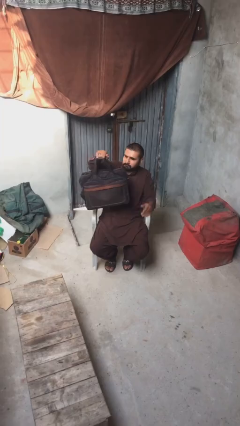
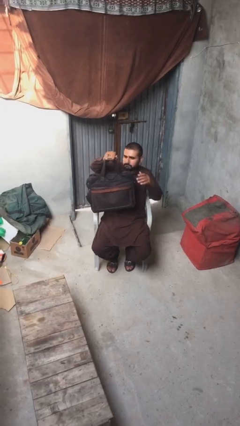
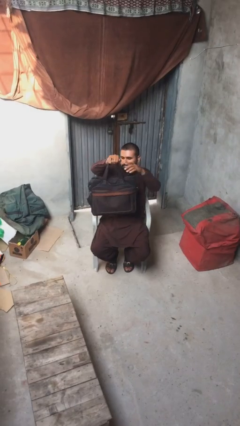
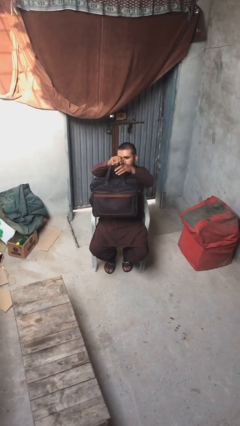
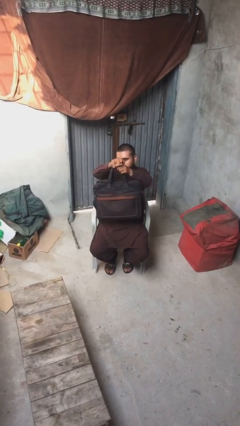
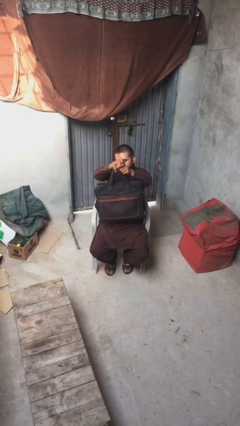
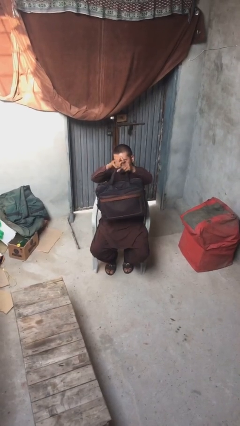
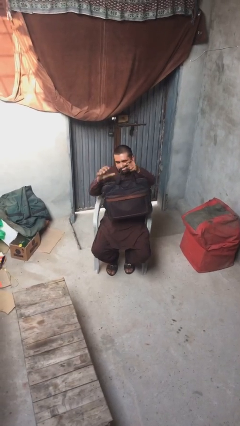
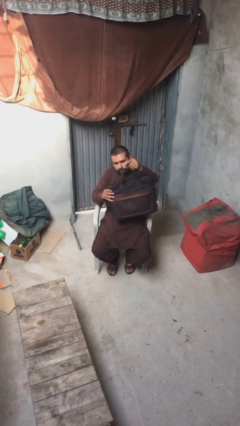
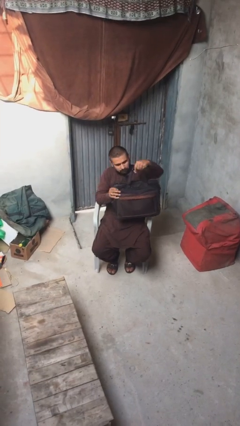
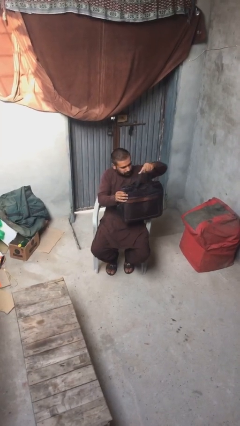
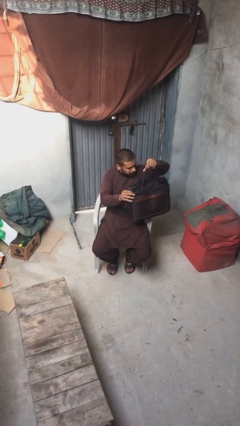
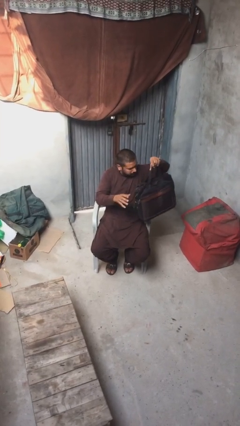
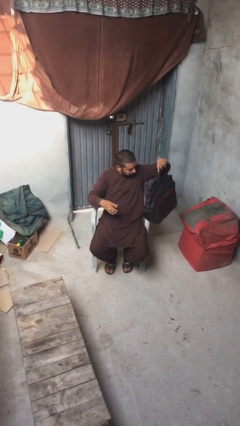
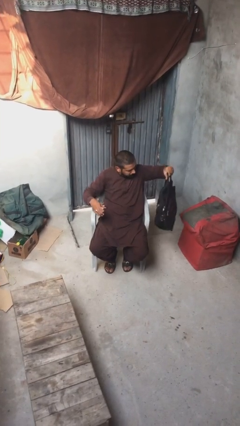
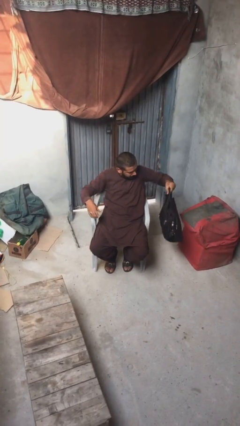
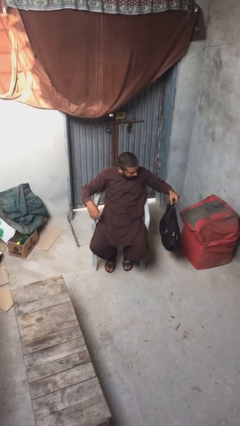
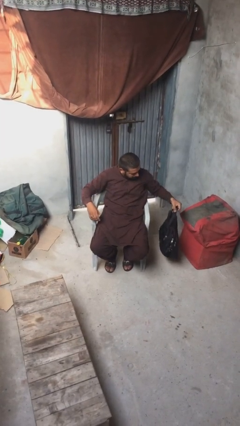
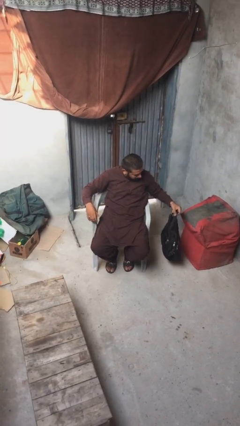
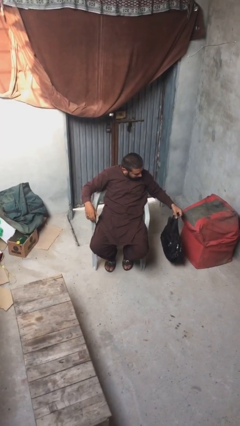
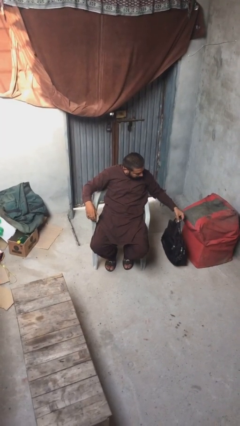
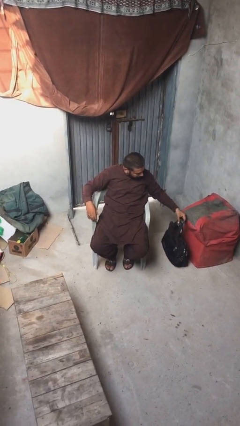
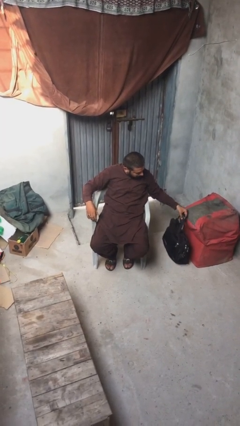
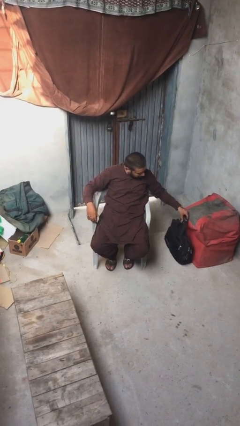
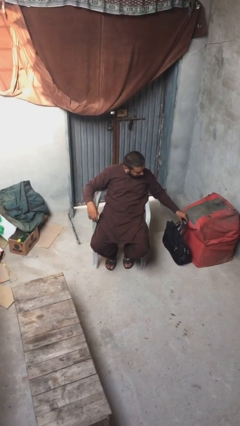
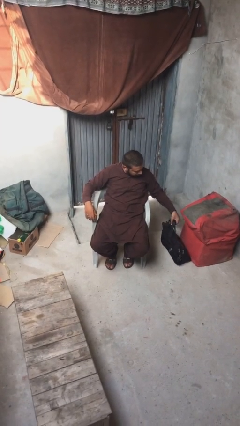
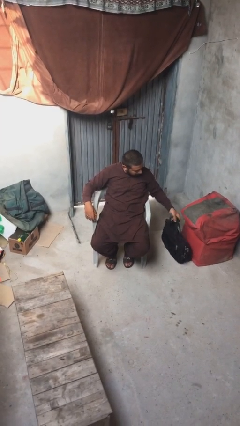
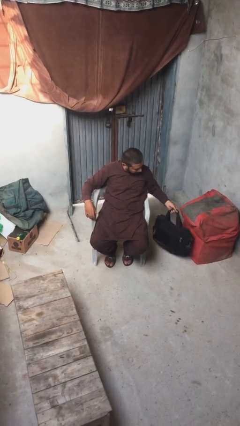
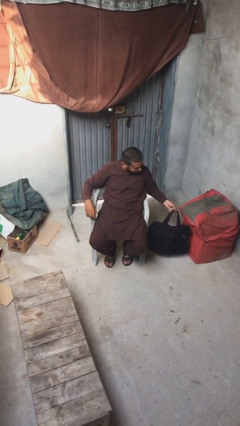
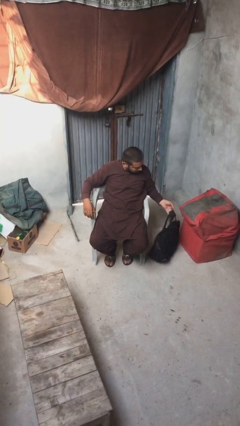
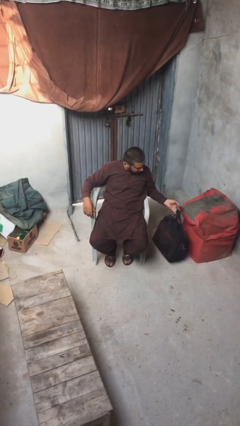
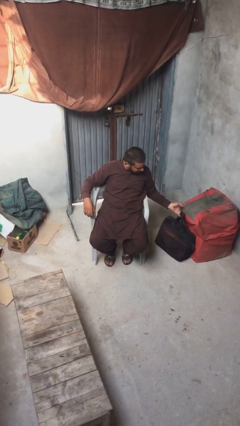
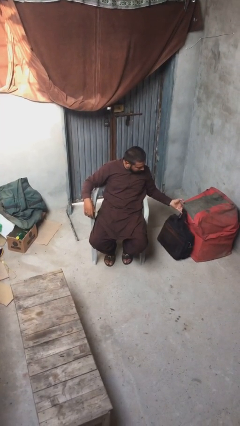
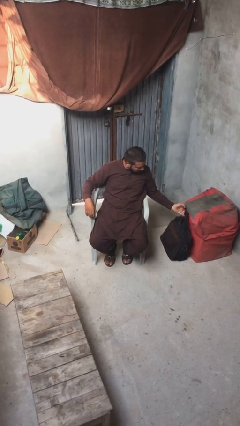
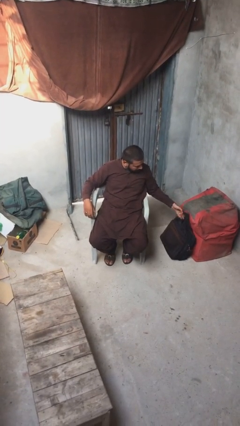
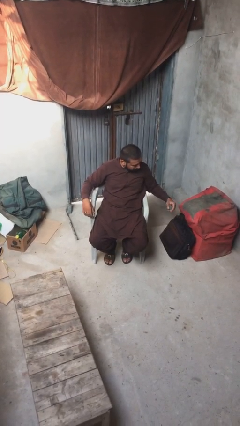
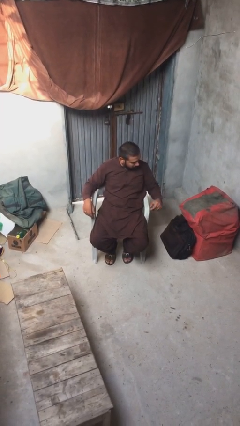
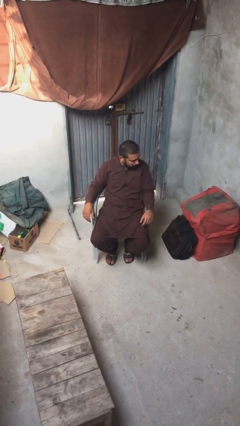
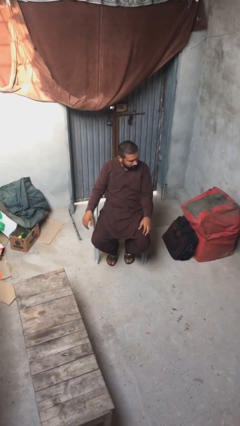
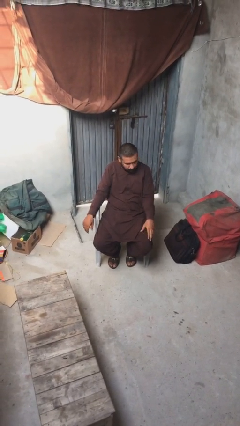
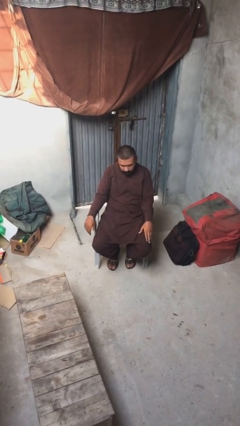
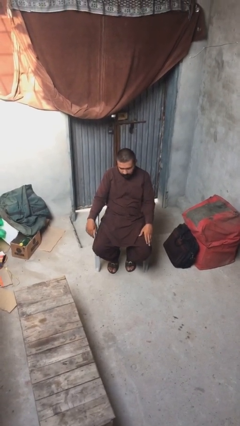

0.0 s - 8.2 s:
person puts down object on floor

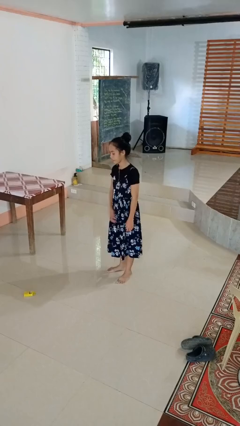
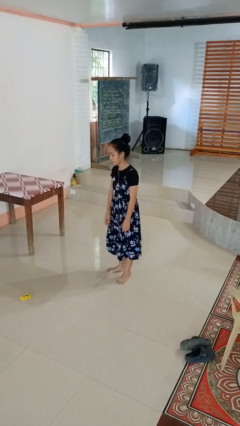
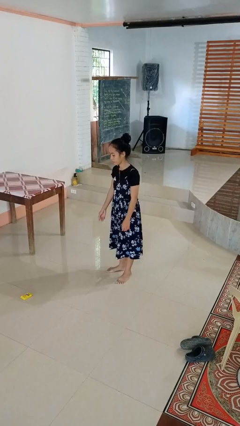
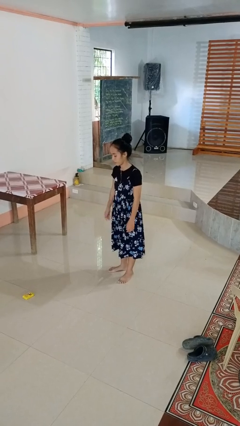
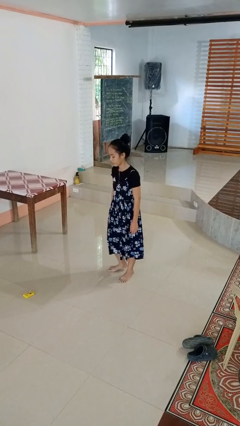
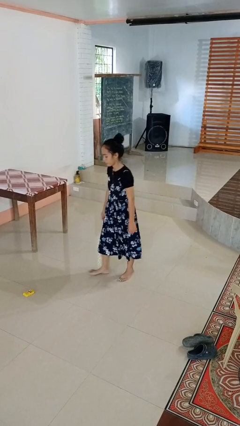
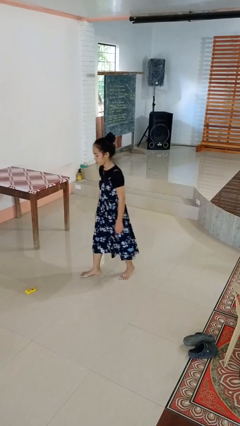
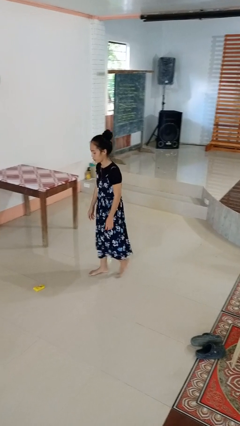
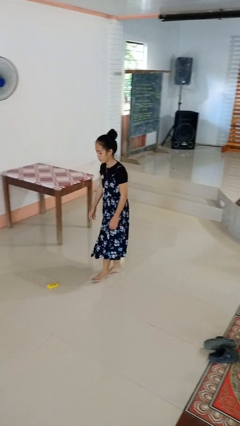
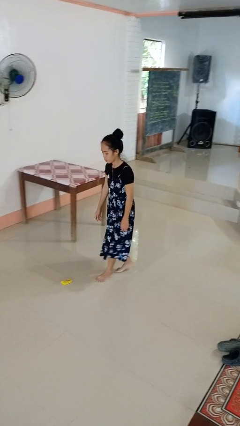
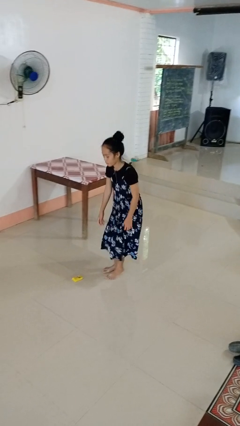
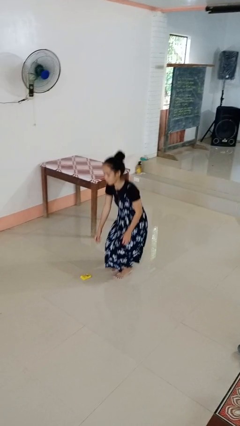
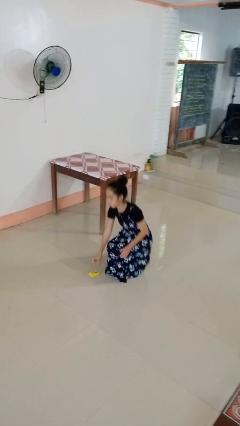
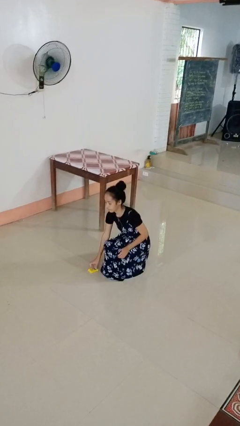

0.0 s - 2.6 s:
person throws object to ground

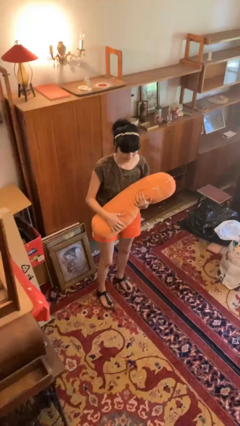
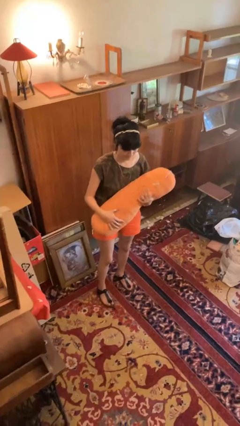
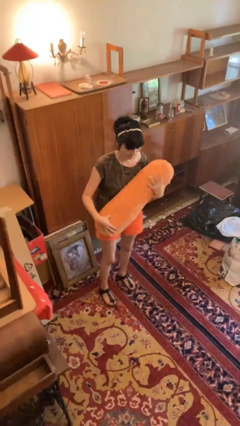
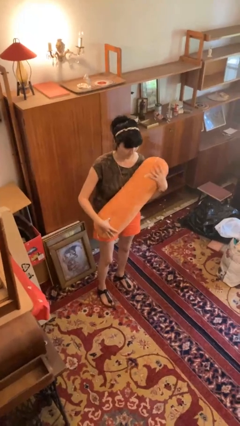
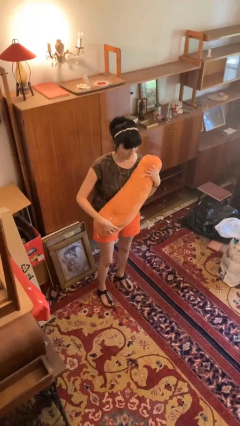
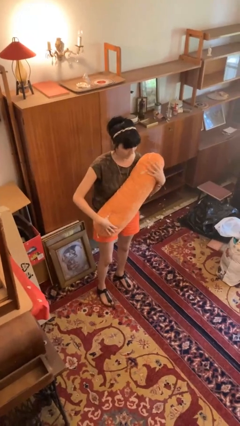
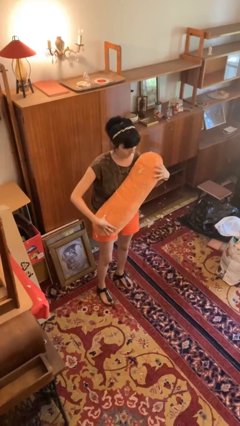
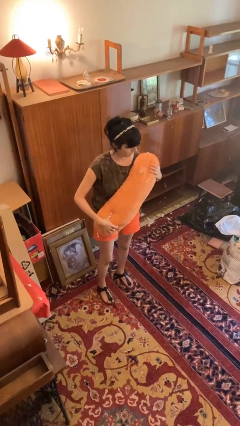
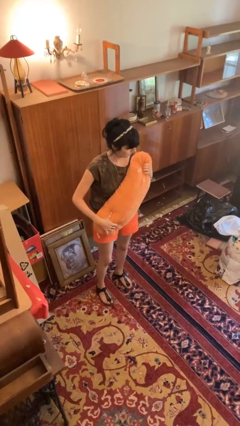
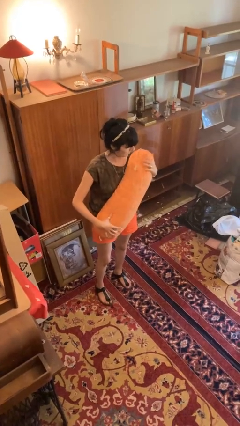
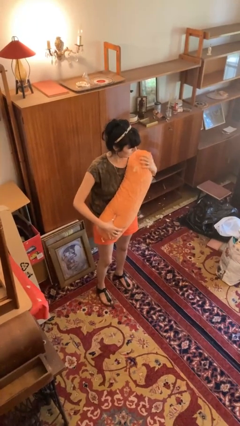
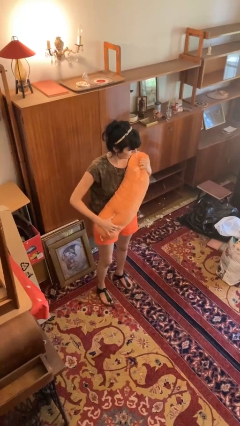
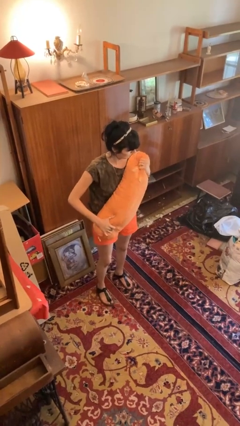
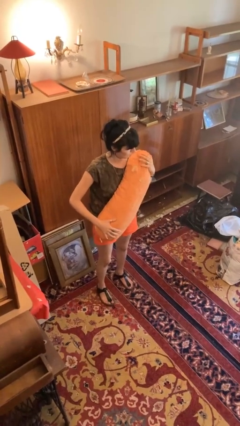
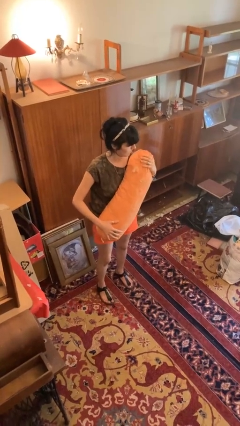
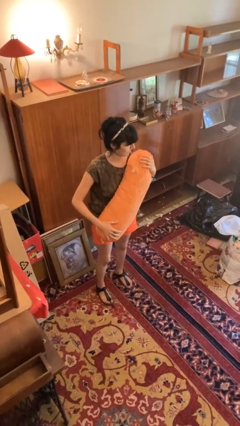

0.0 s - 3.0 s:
person squeezes object

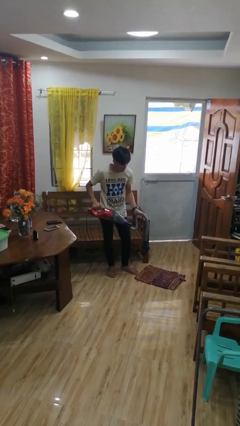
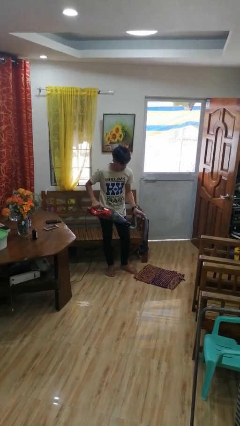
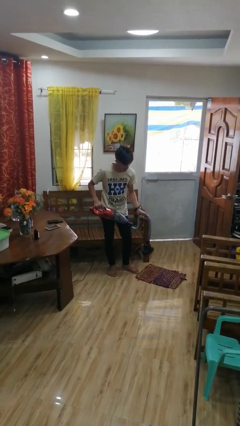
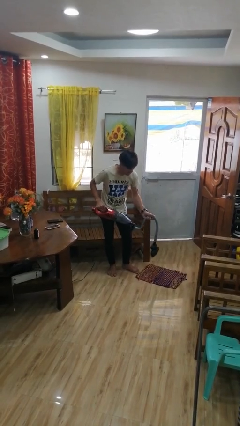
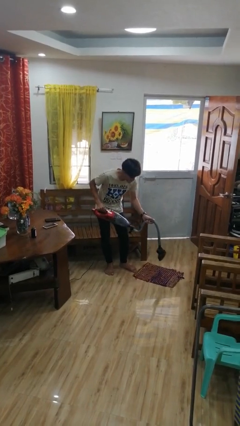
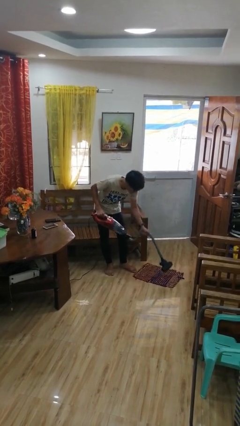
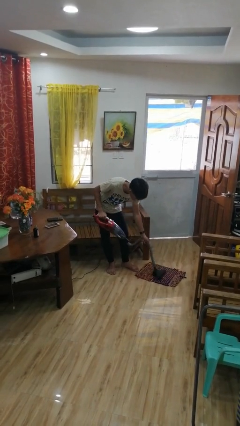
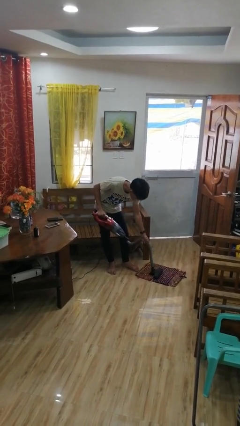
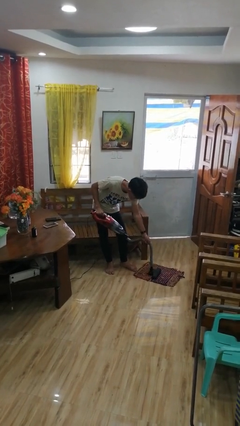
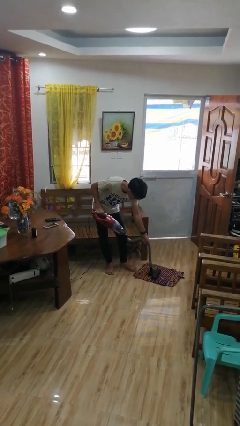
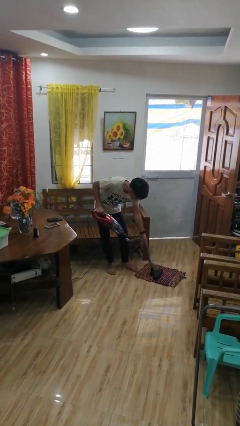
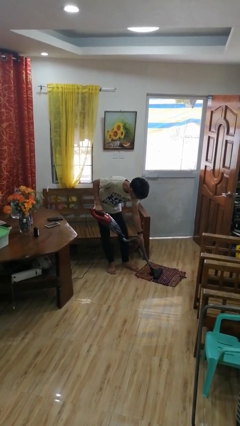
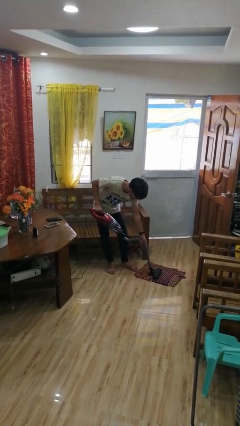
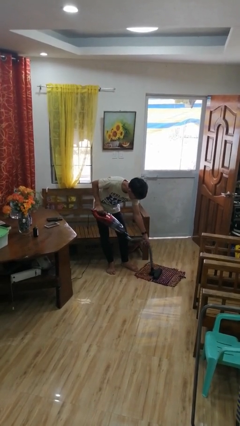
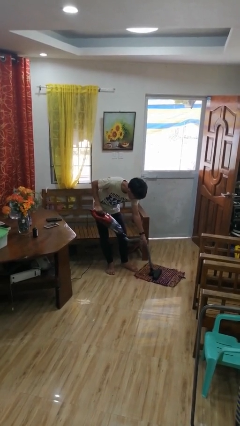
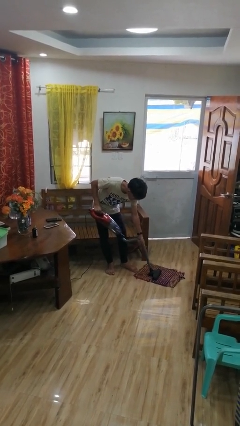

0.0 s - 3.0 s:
person vacuums carpet

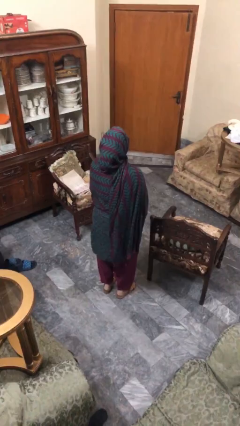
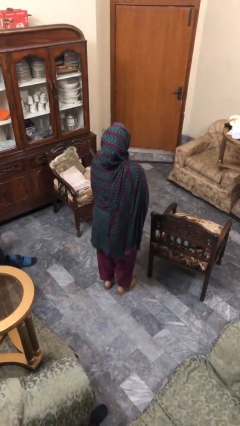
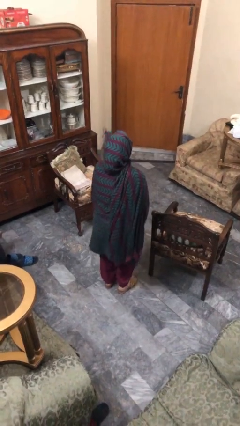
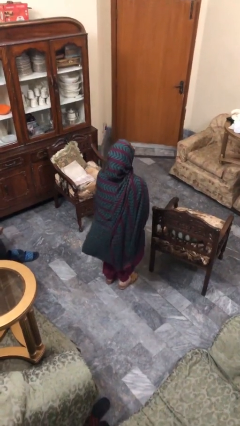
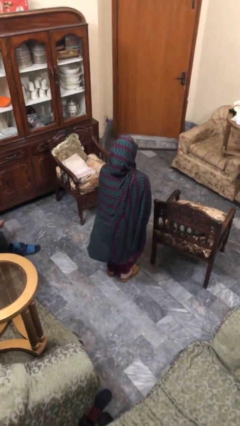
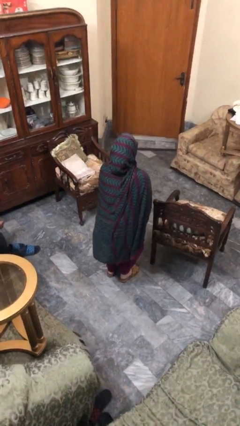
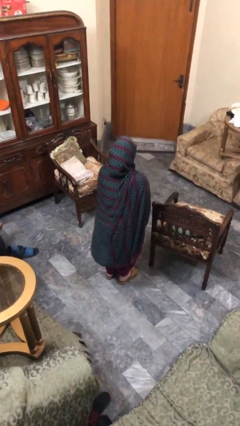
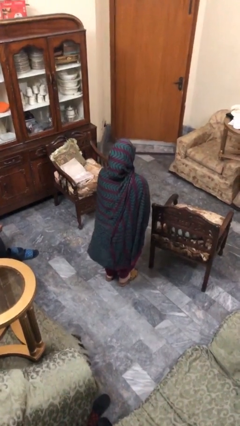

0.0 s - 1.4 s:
person squats
